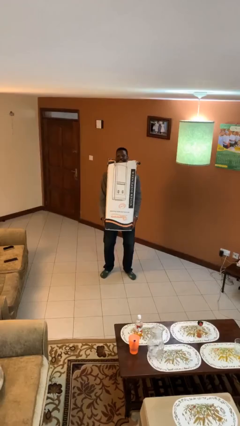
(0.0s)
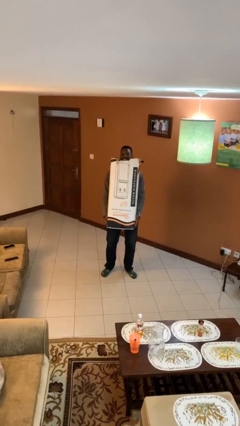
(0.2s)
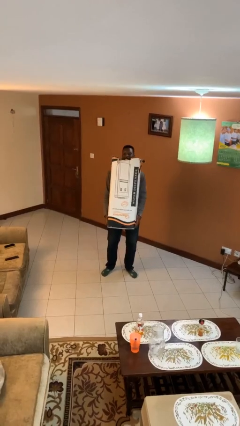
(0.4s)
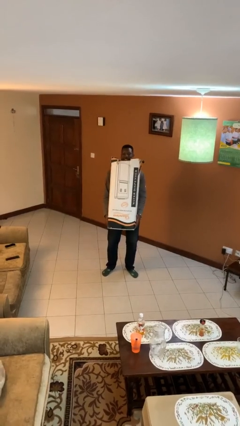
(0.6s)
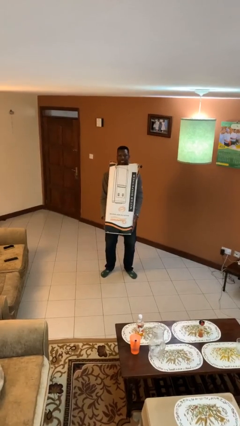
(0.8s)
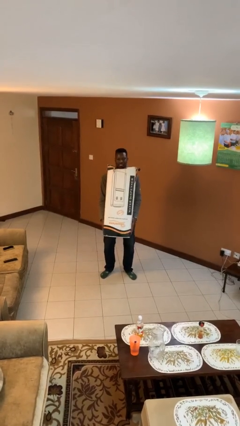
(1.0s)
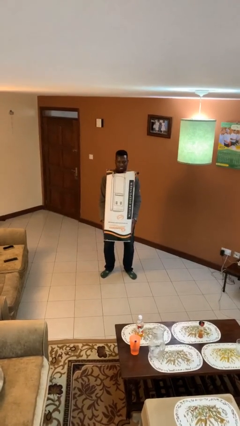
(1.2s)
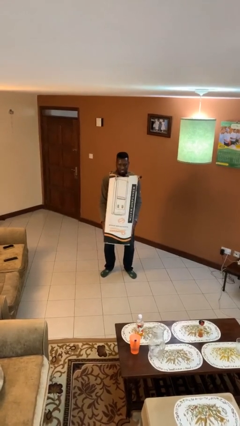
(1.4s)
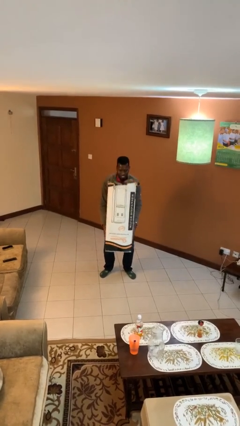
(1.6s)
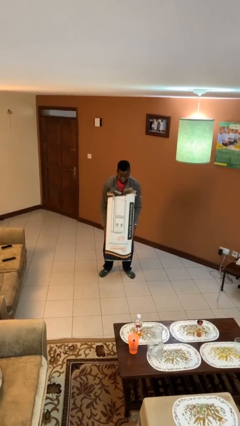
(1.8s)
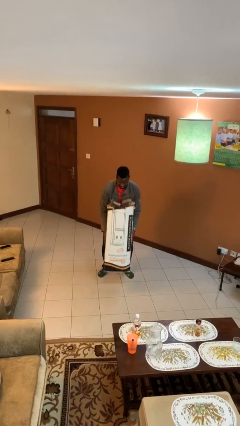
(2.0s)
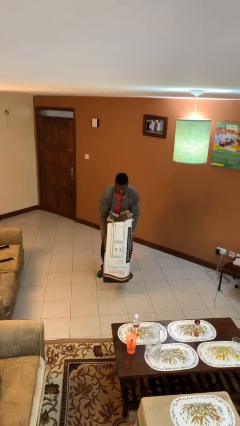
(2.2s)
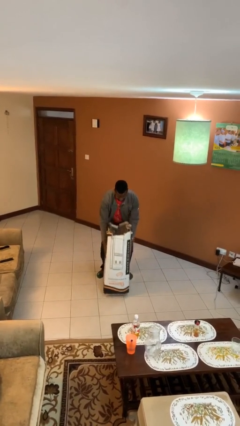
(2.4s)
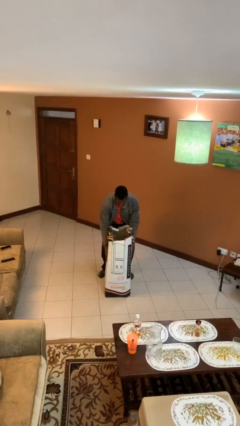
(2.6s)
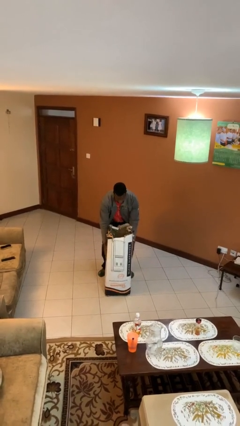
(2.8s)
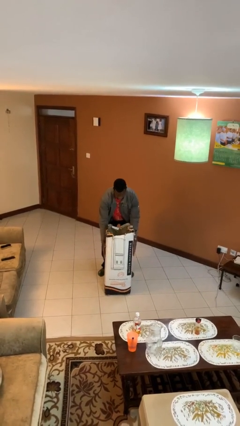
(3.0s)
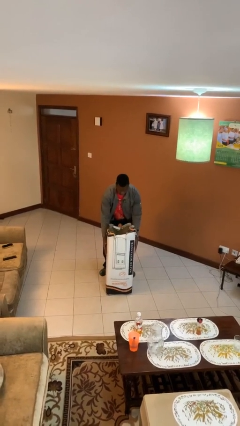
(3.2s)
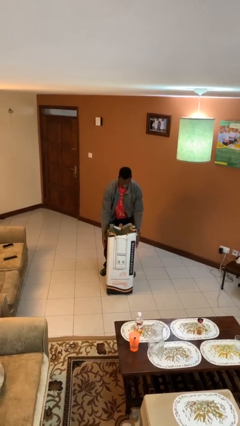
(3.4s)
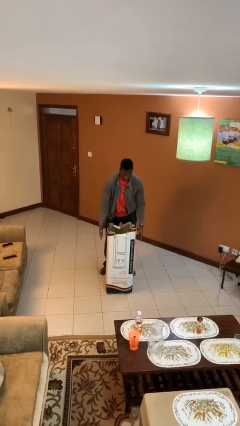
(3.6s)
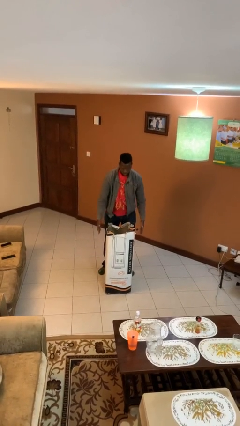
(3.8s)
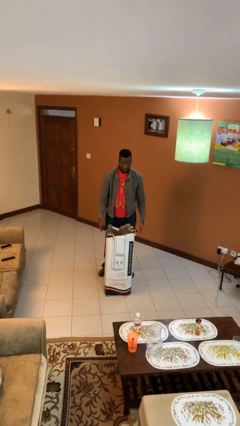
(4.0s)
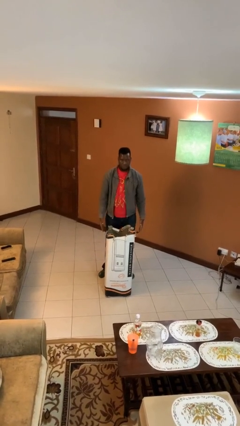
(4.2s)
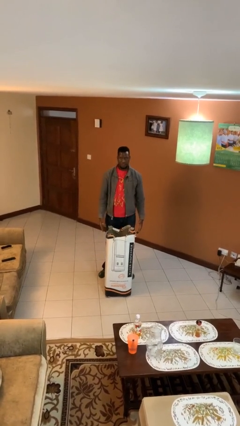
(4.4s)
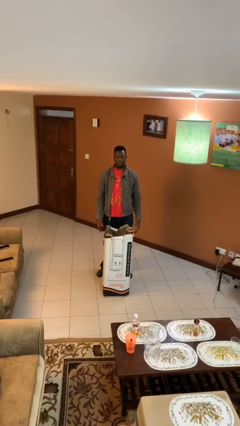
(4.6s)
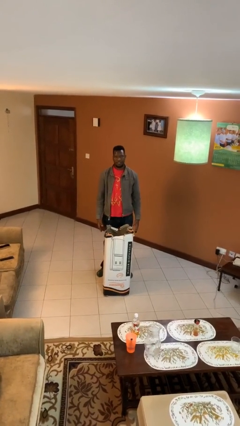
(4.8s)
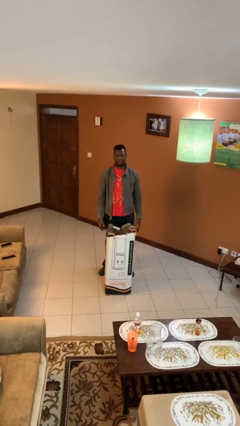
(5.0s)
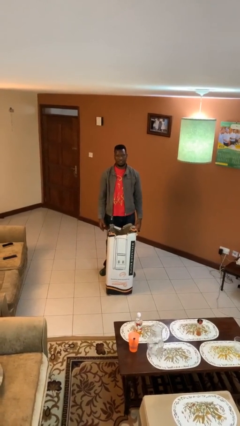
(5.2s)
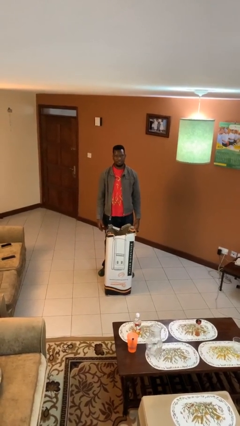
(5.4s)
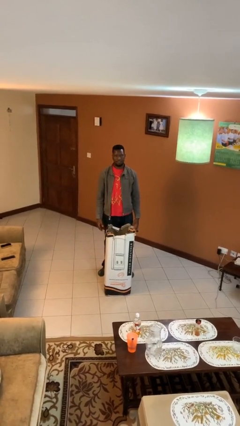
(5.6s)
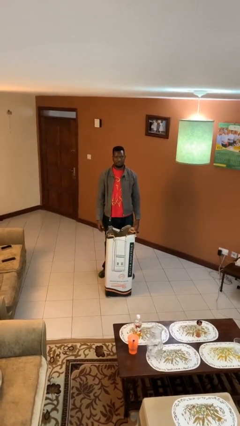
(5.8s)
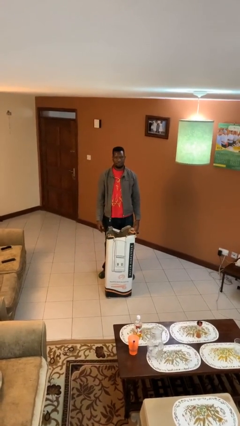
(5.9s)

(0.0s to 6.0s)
person puts down object on floor

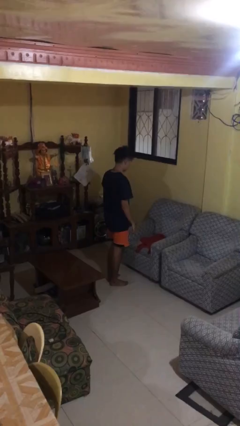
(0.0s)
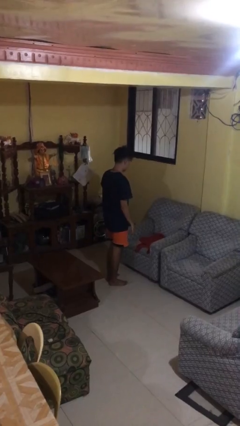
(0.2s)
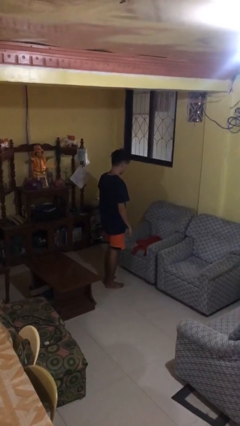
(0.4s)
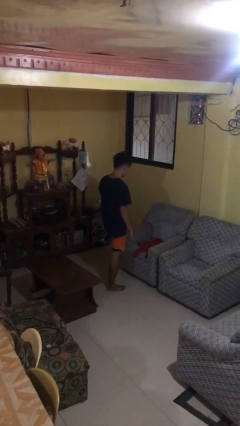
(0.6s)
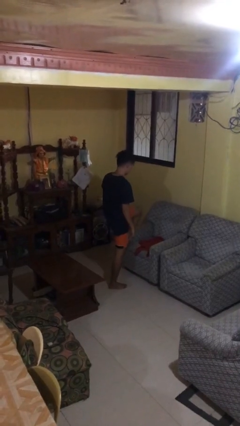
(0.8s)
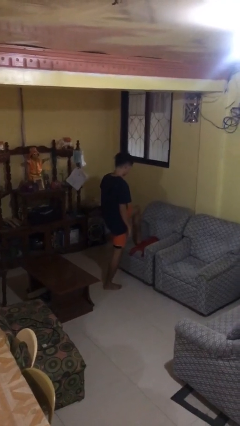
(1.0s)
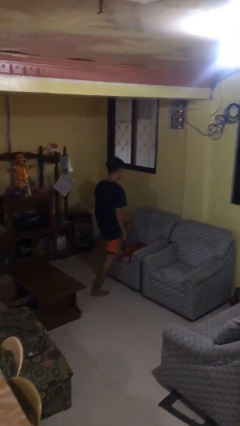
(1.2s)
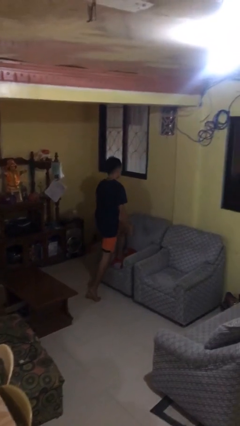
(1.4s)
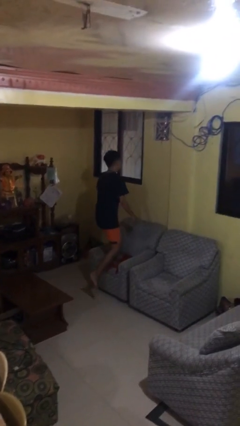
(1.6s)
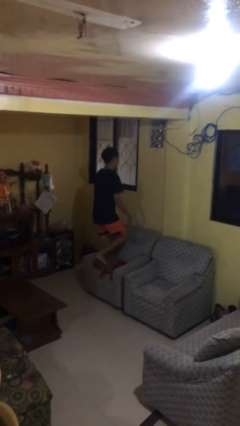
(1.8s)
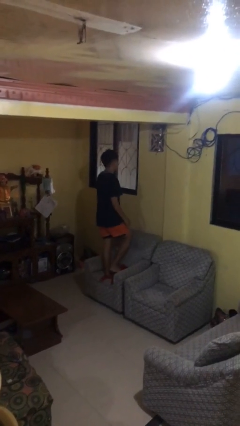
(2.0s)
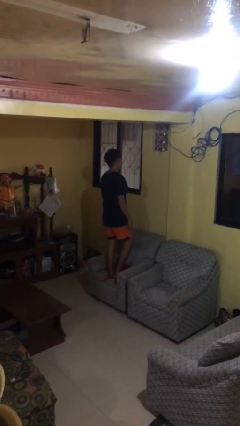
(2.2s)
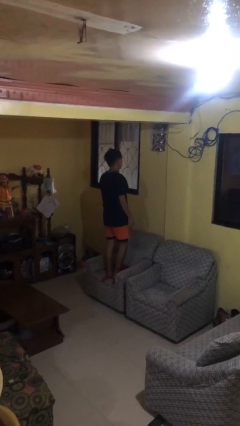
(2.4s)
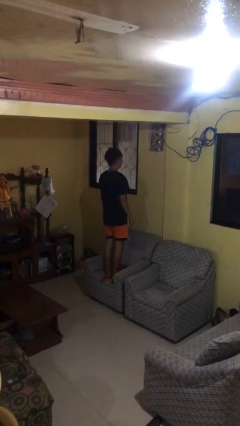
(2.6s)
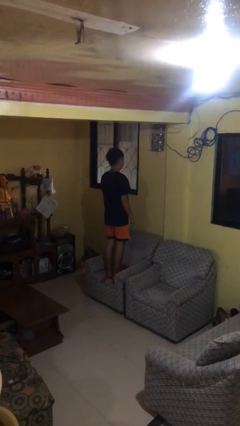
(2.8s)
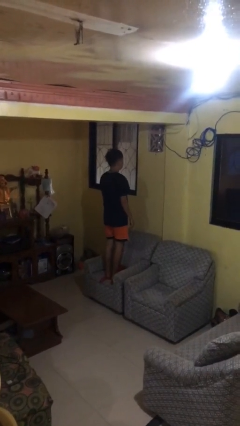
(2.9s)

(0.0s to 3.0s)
person climbs on couch

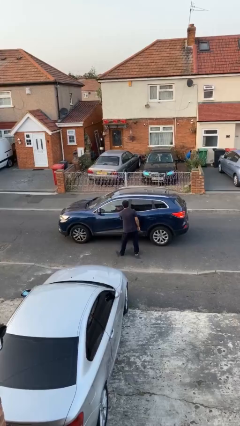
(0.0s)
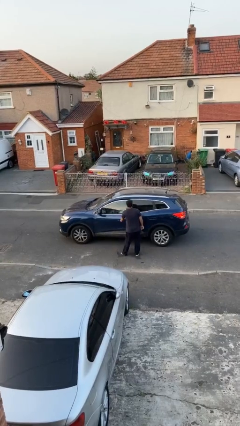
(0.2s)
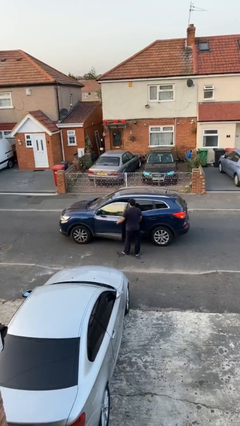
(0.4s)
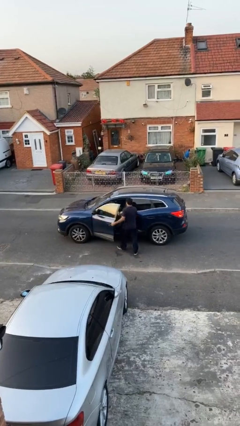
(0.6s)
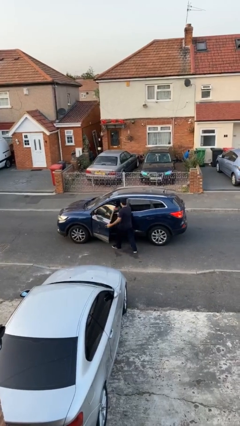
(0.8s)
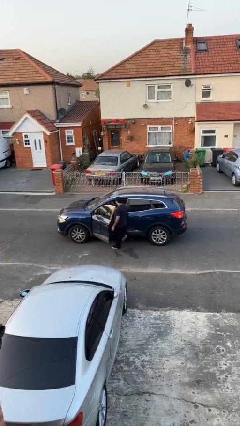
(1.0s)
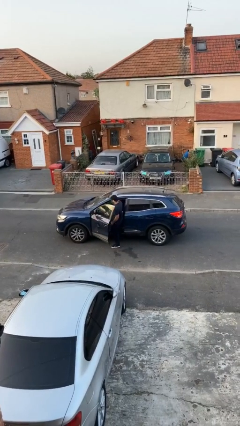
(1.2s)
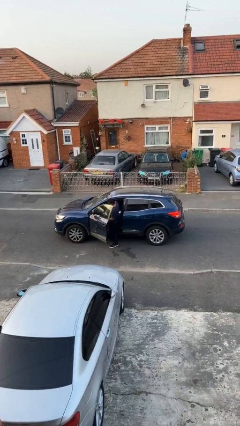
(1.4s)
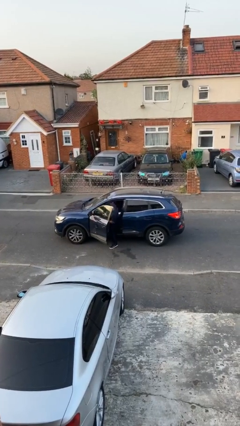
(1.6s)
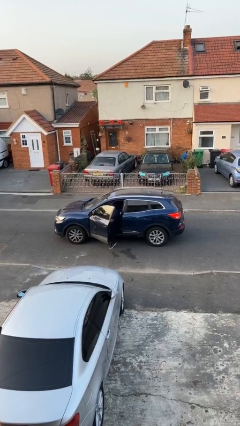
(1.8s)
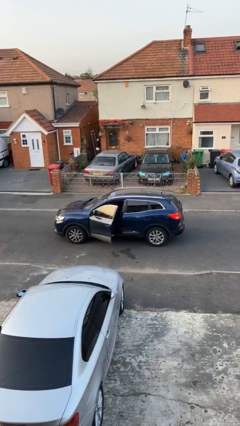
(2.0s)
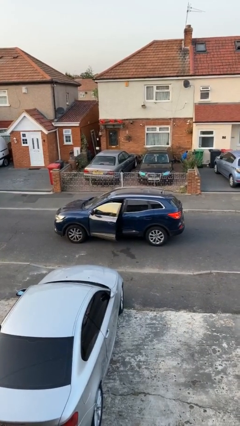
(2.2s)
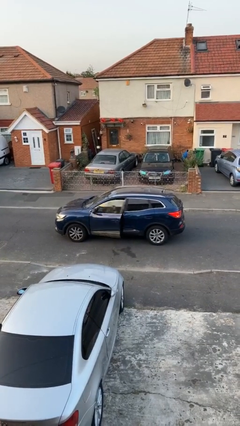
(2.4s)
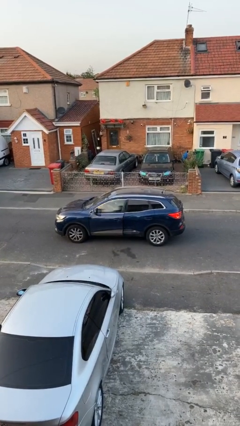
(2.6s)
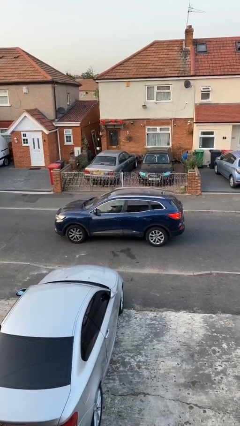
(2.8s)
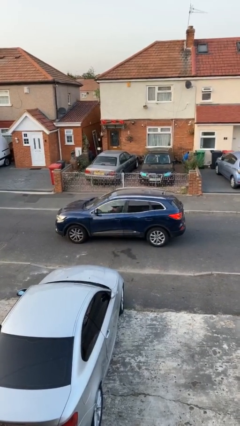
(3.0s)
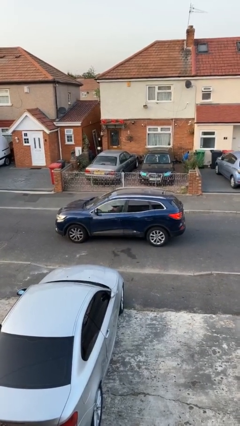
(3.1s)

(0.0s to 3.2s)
car picks up person

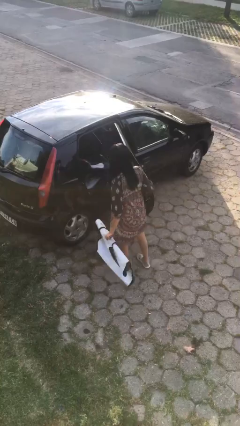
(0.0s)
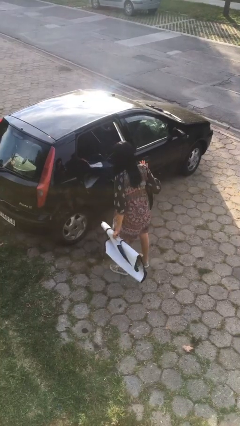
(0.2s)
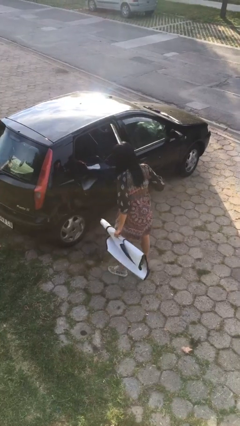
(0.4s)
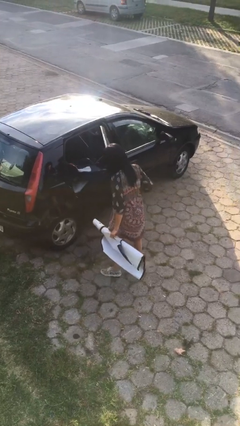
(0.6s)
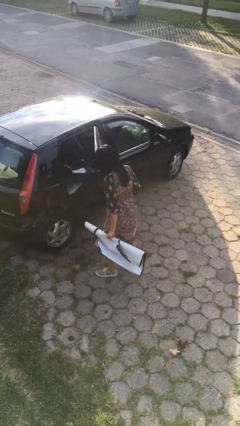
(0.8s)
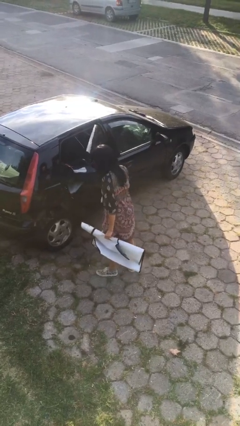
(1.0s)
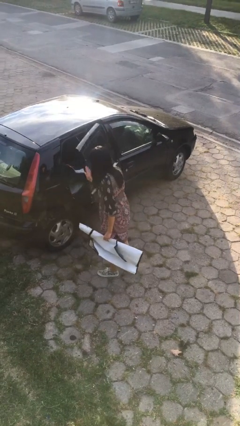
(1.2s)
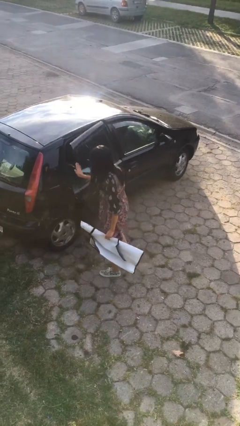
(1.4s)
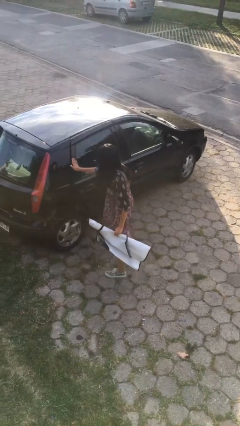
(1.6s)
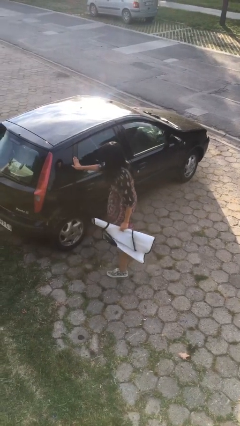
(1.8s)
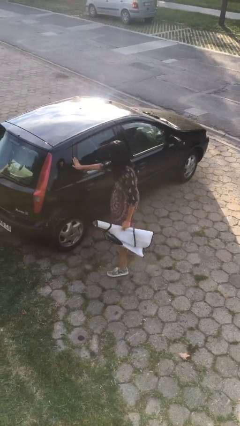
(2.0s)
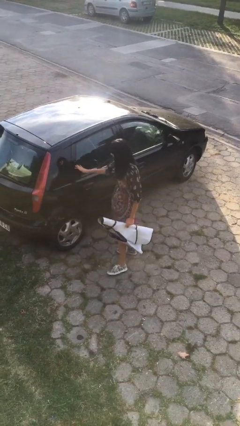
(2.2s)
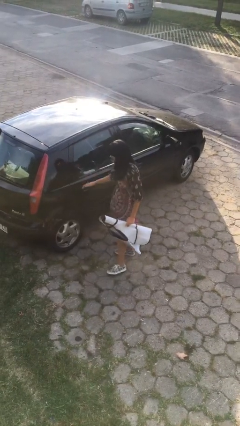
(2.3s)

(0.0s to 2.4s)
person closes car door

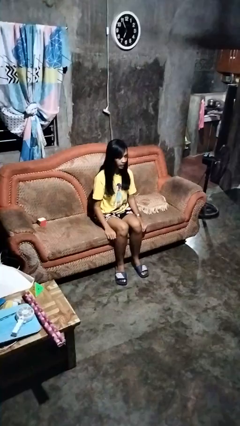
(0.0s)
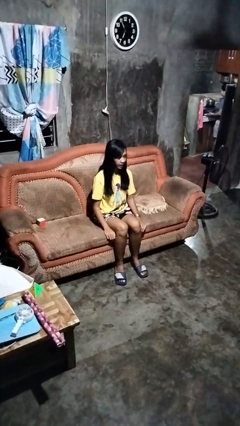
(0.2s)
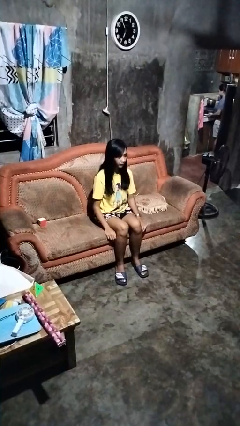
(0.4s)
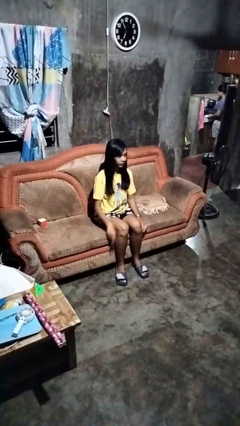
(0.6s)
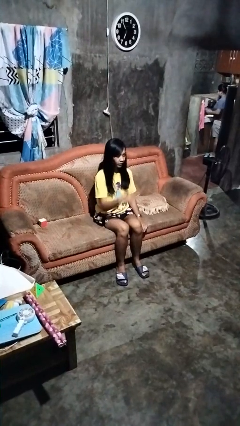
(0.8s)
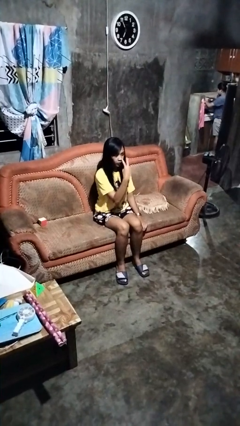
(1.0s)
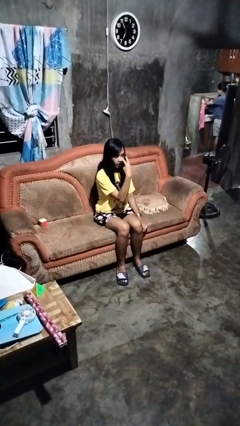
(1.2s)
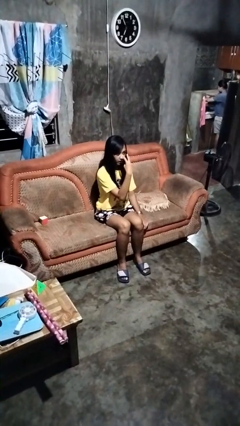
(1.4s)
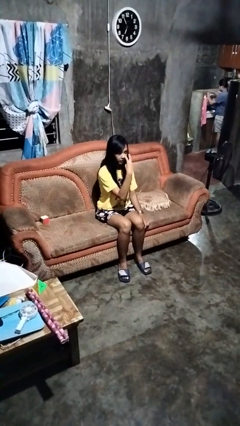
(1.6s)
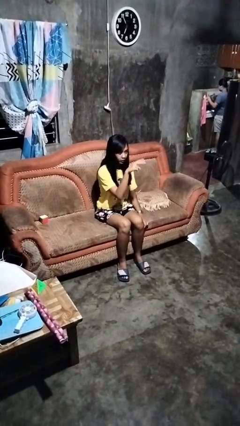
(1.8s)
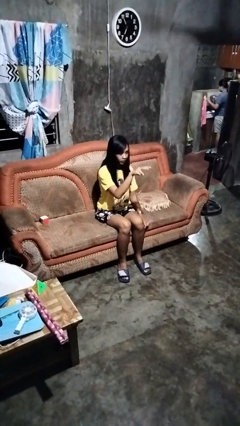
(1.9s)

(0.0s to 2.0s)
person gestures watch closely

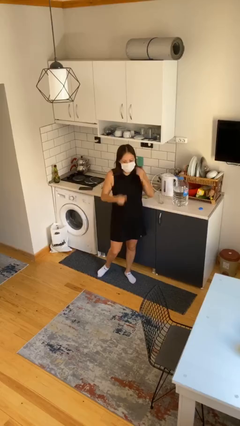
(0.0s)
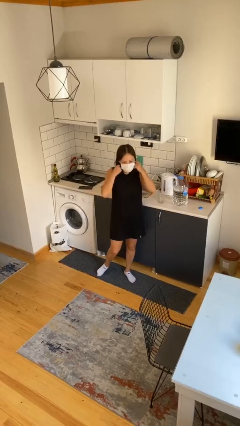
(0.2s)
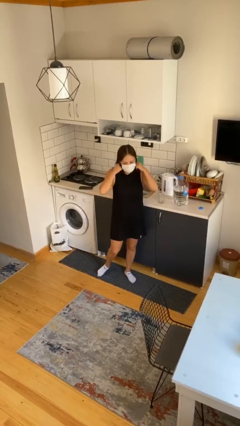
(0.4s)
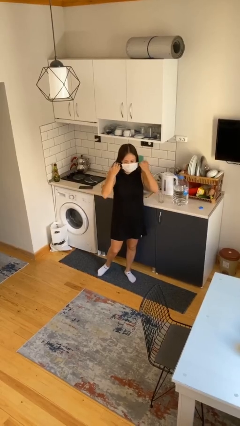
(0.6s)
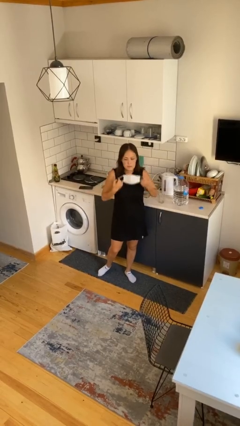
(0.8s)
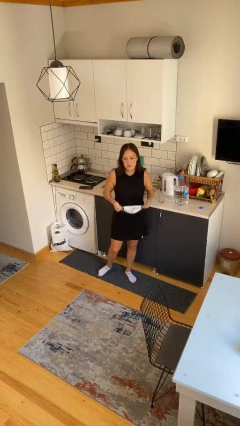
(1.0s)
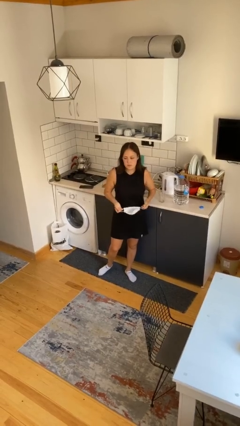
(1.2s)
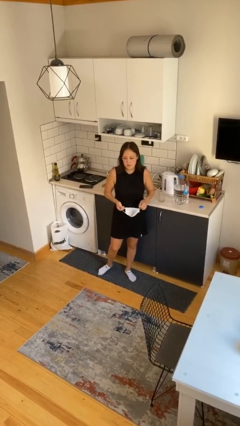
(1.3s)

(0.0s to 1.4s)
person takes off facemask
